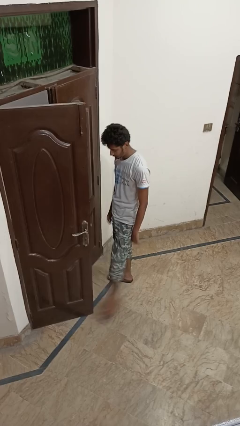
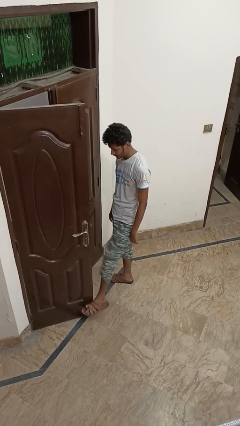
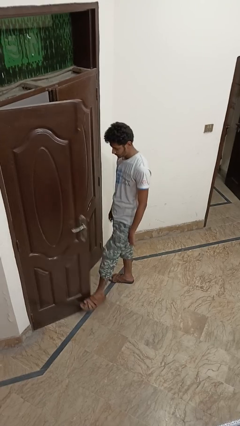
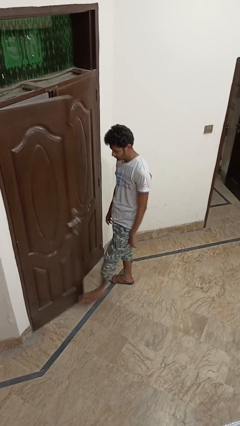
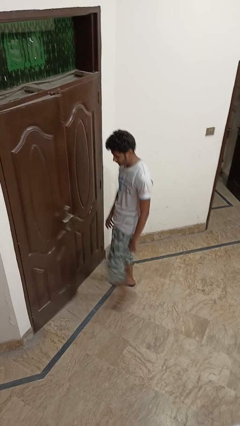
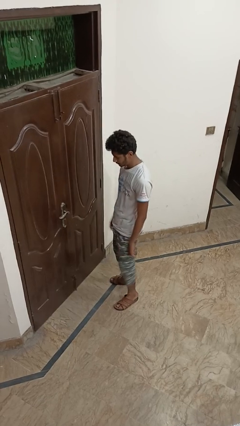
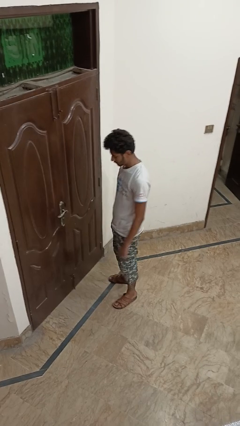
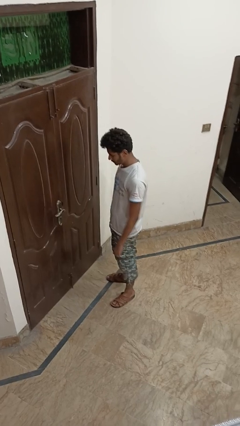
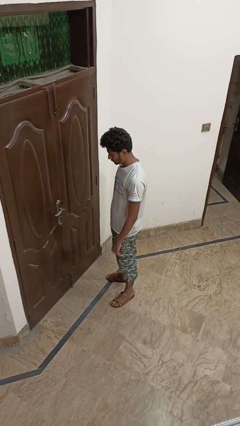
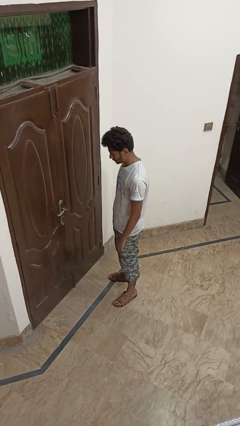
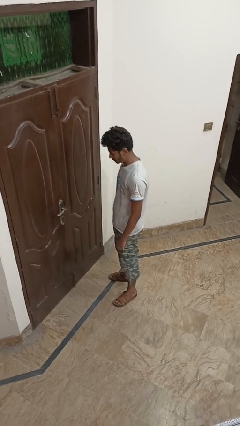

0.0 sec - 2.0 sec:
person closes door with foot

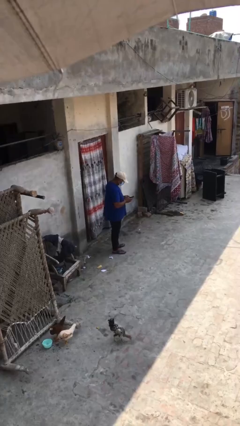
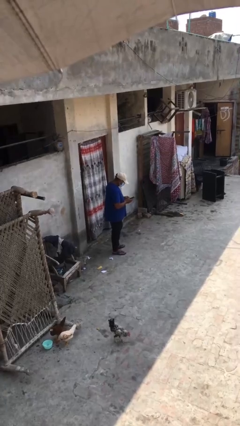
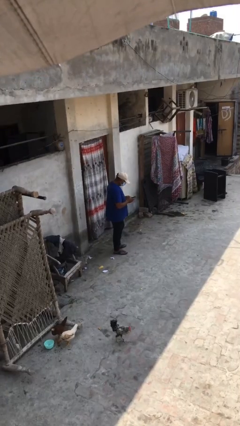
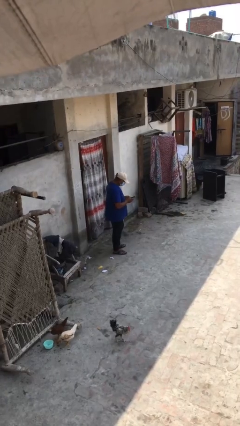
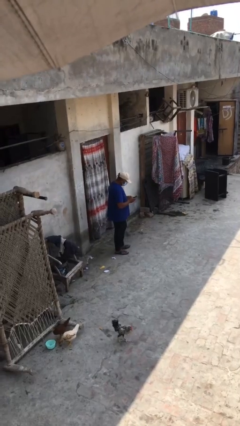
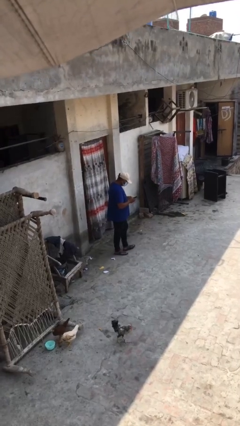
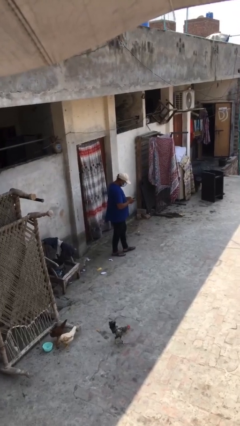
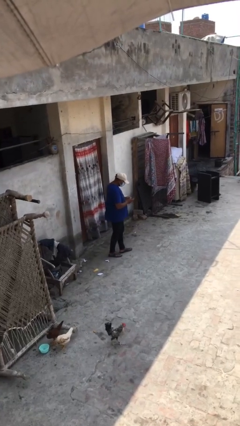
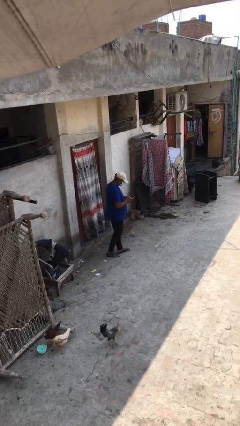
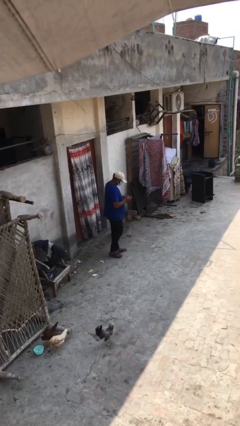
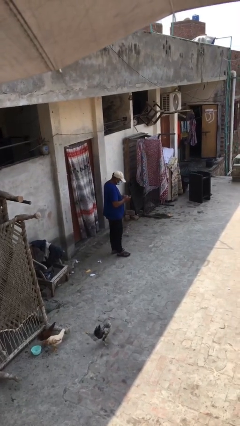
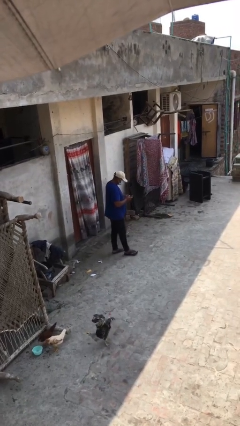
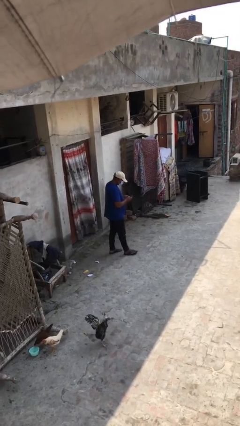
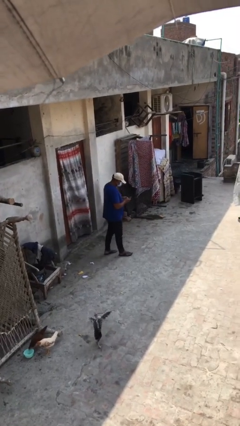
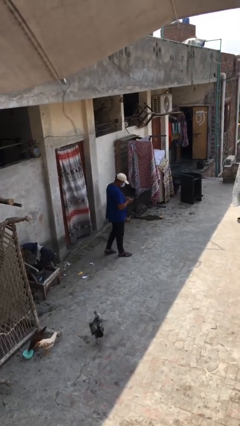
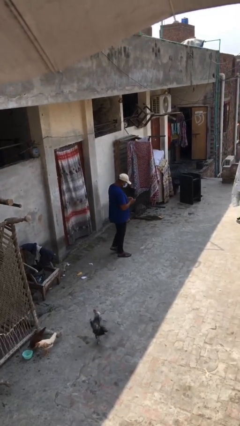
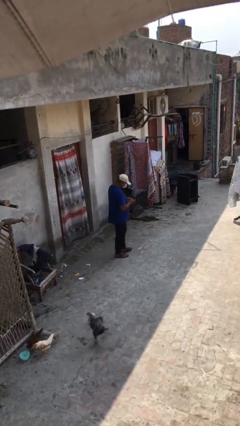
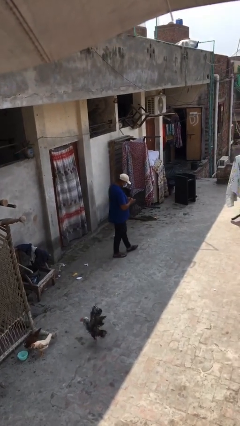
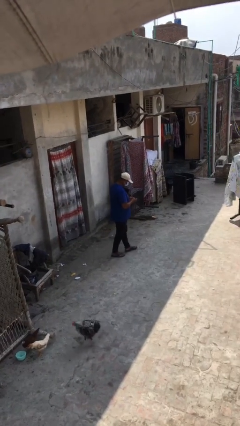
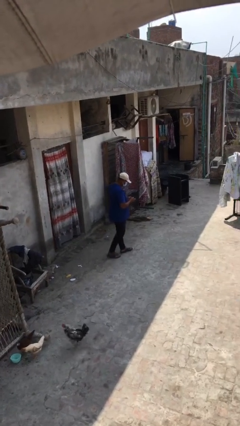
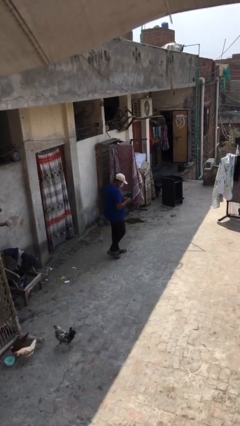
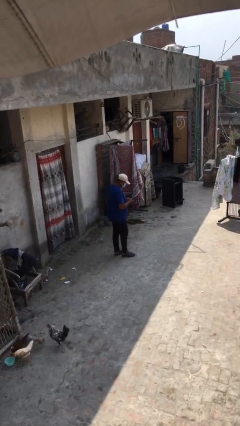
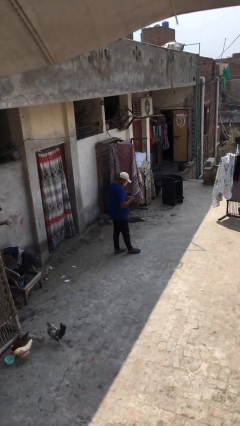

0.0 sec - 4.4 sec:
person texts on phone

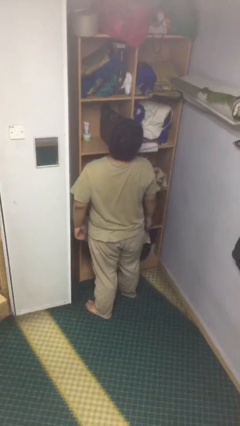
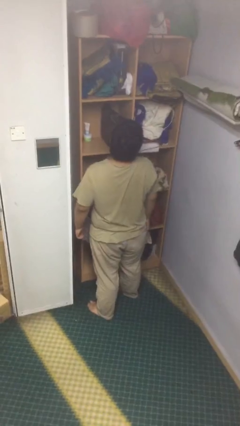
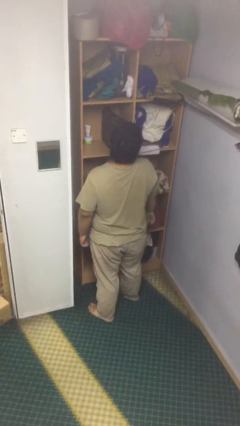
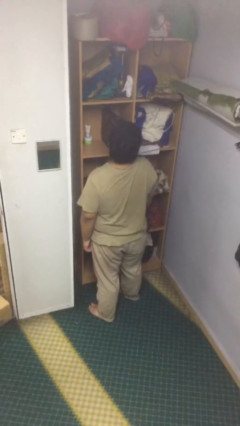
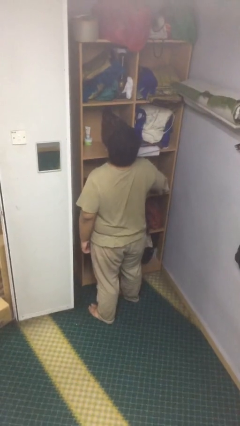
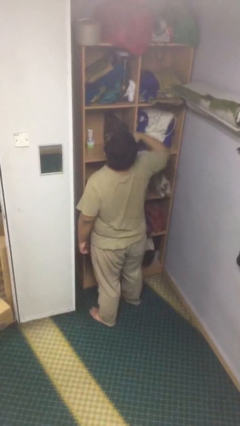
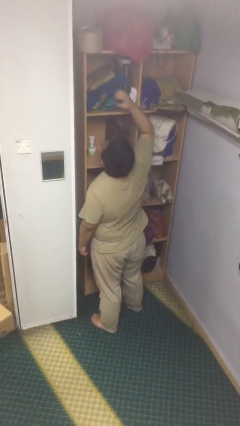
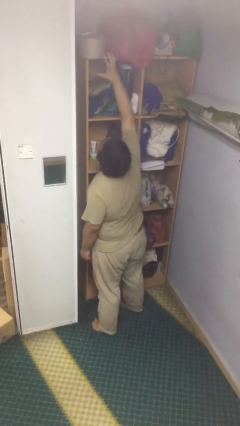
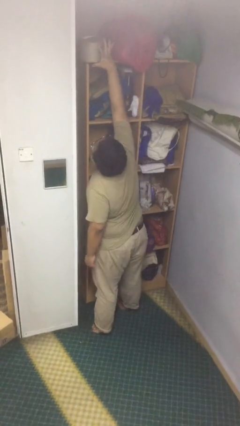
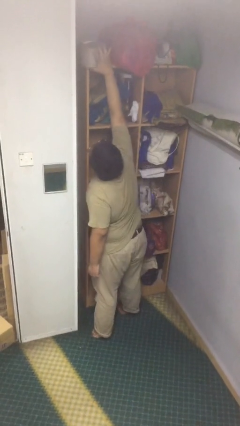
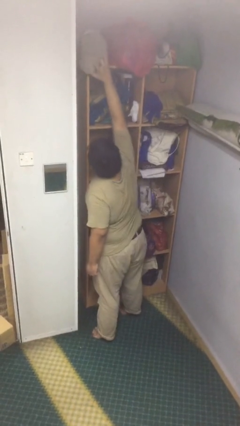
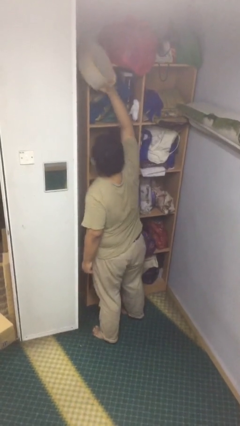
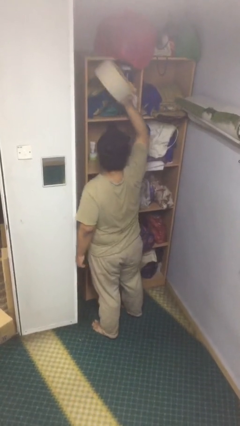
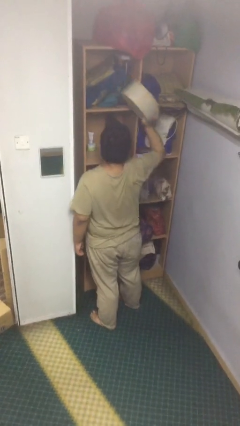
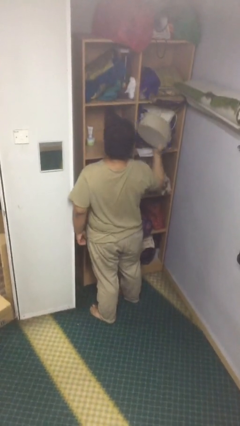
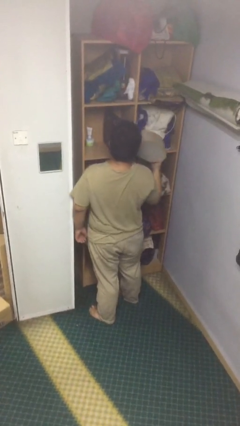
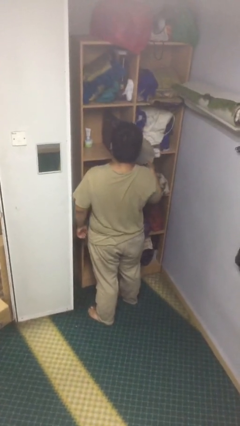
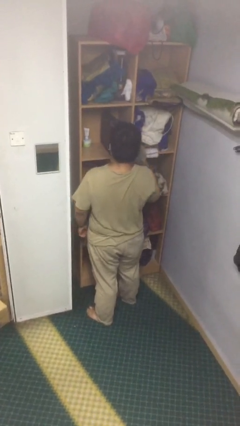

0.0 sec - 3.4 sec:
person picks up object from shelf

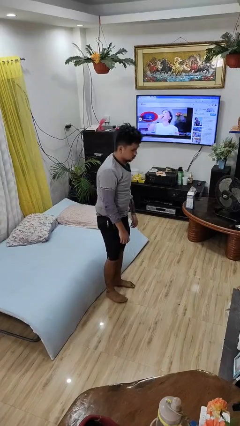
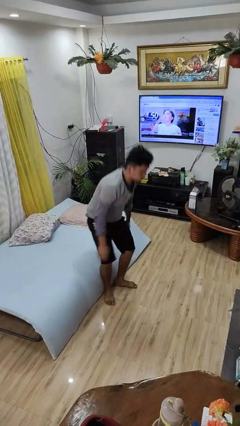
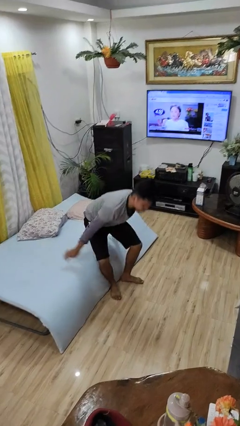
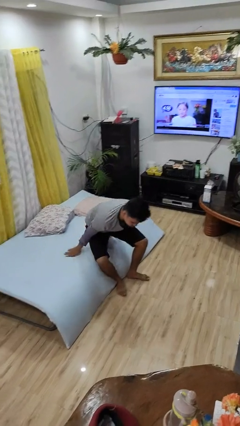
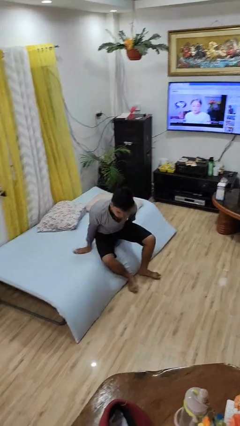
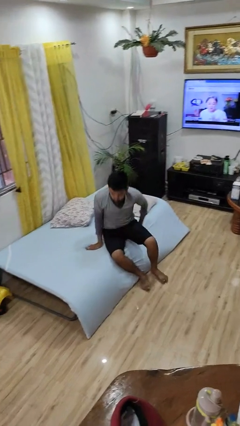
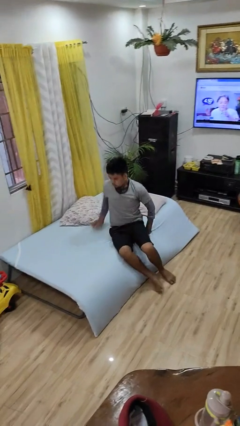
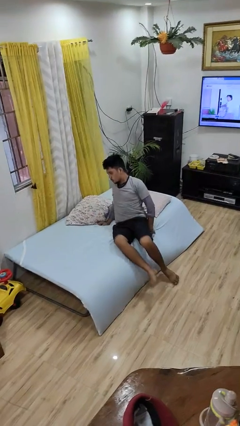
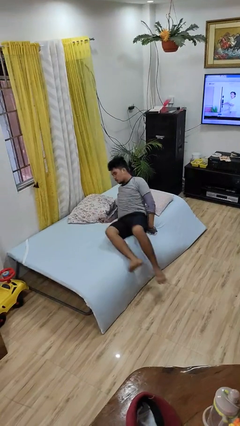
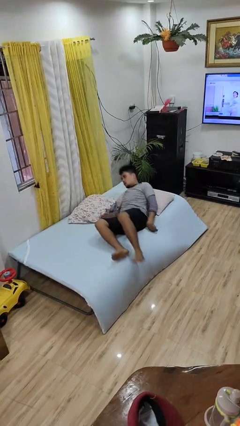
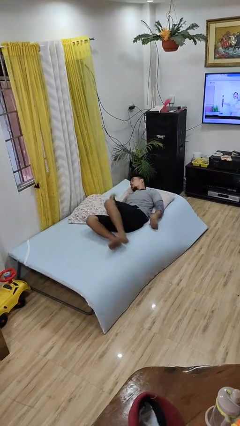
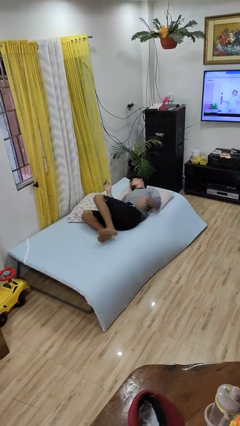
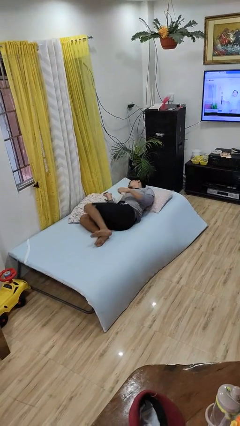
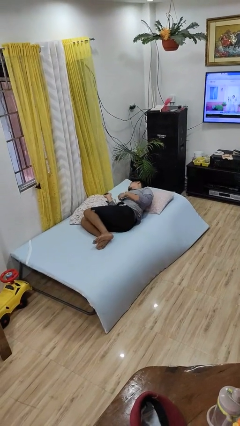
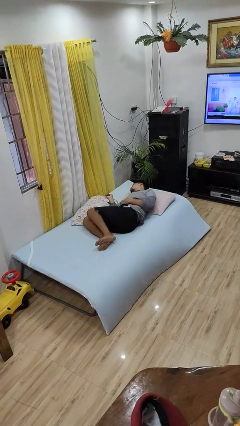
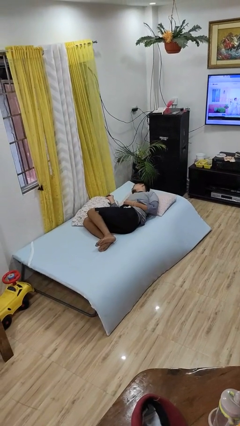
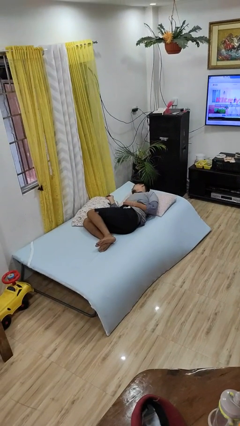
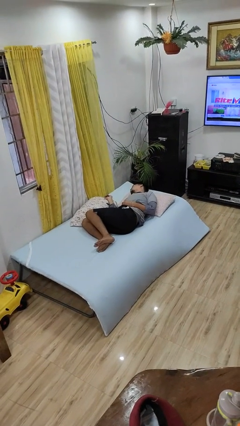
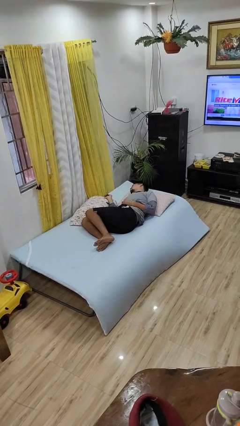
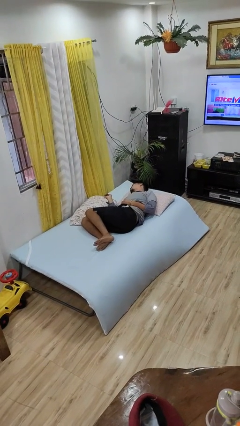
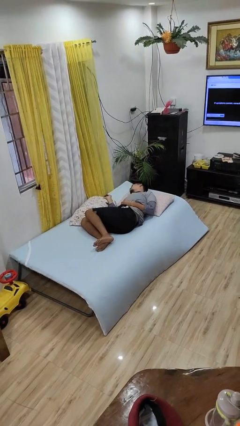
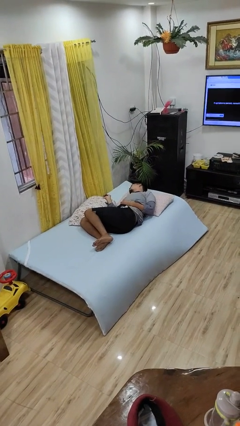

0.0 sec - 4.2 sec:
person lies down on bed

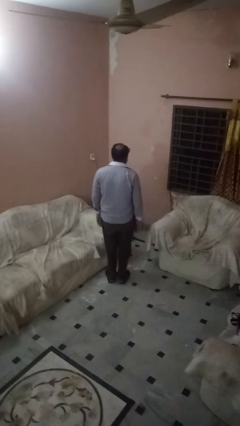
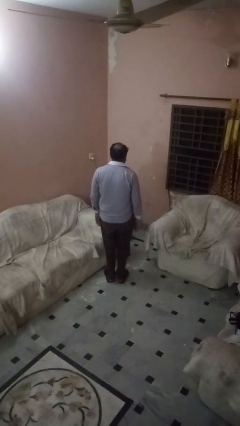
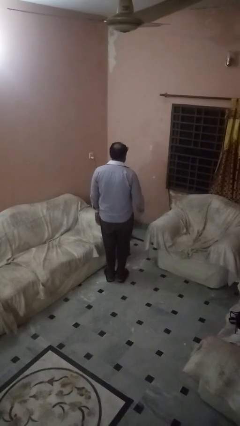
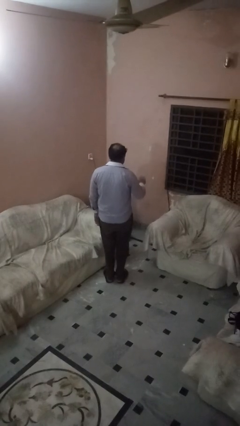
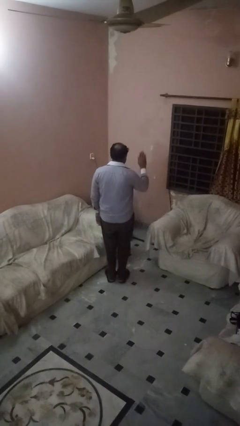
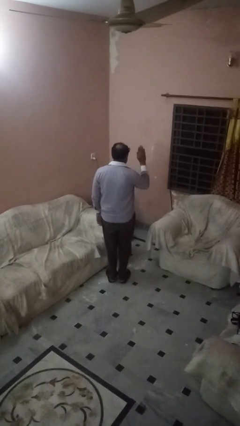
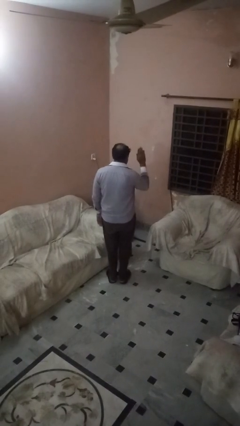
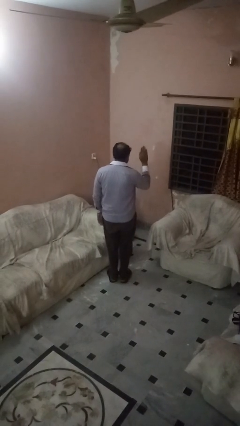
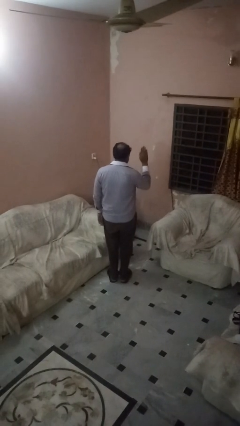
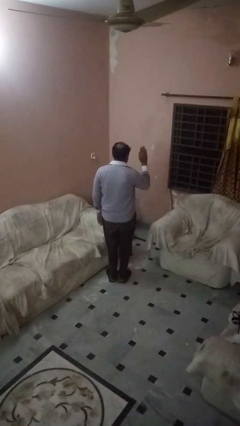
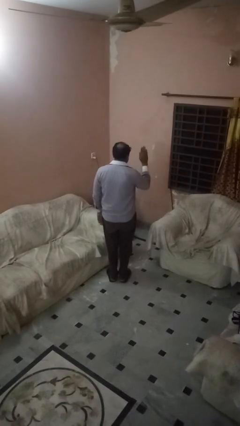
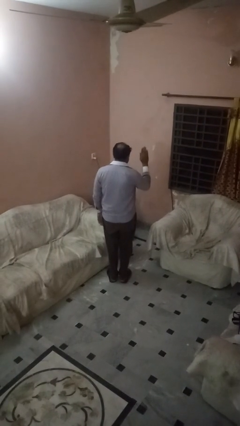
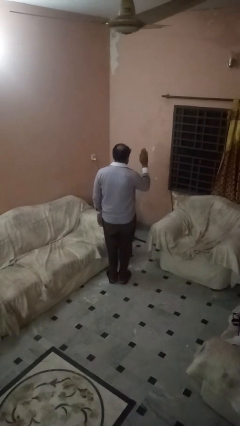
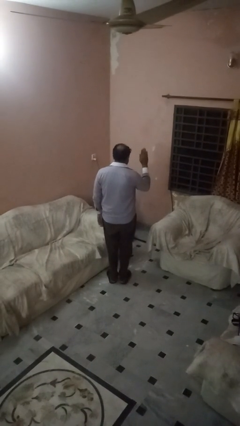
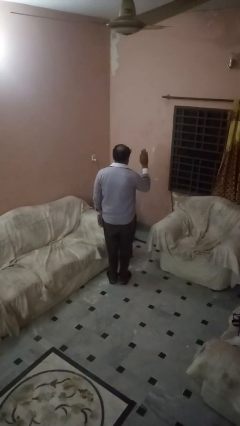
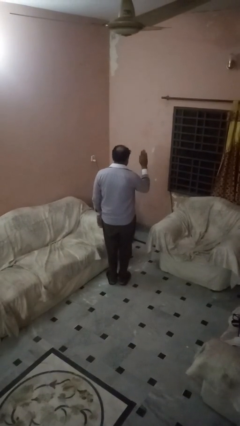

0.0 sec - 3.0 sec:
person gestures stop

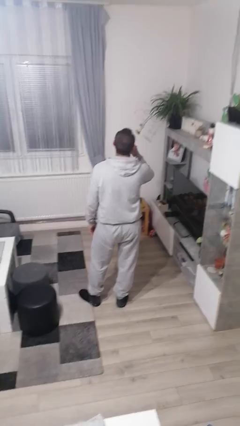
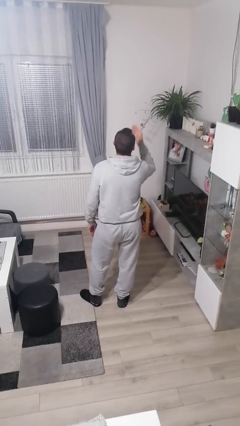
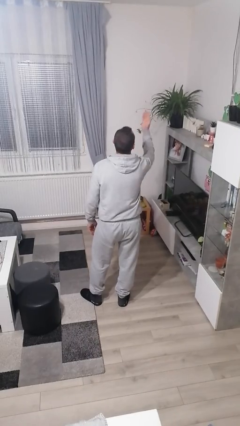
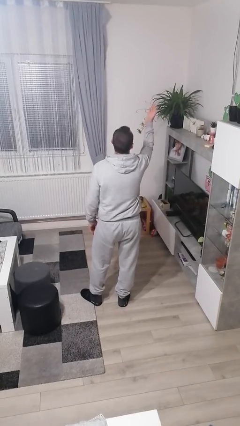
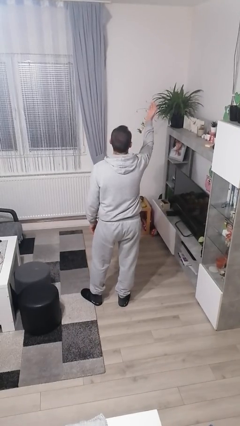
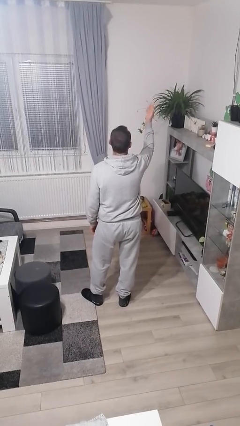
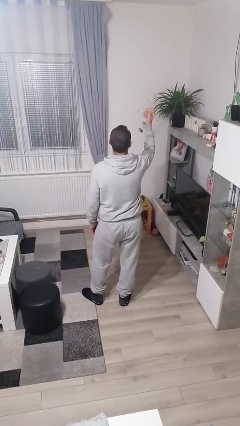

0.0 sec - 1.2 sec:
person gestures blow kiss
